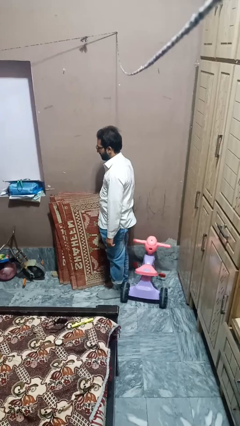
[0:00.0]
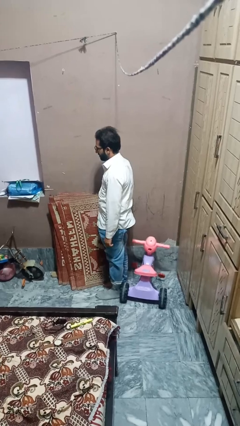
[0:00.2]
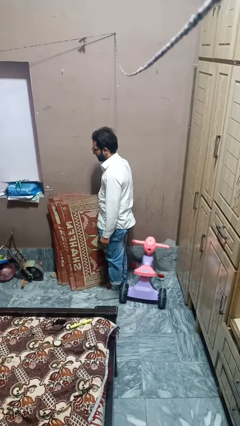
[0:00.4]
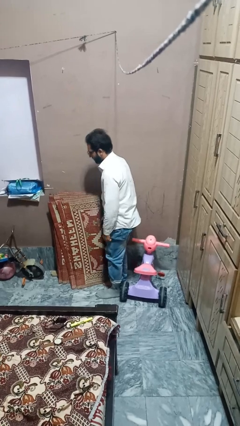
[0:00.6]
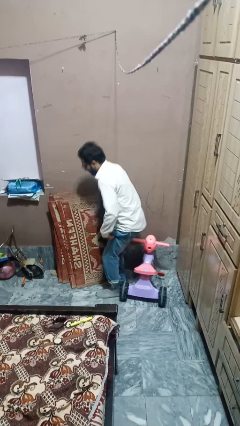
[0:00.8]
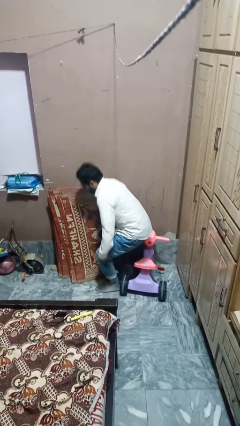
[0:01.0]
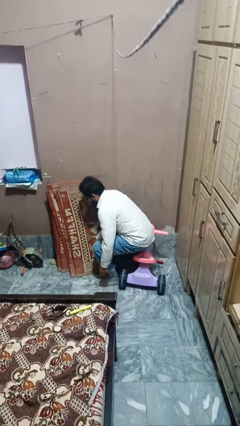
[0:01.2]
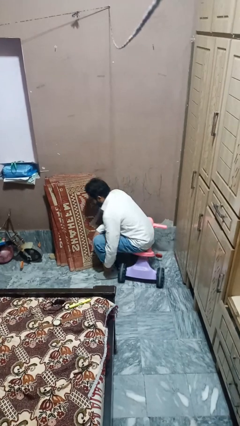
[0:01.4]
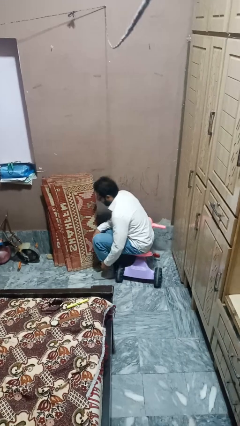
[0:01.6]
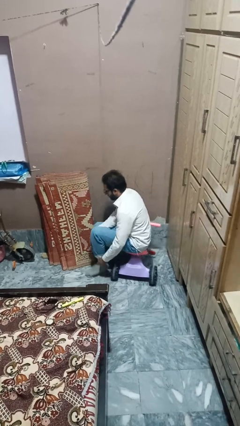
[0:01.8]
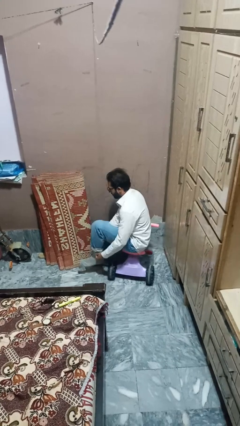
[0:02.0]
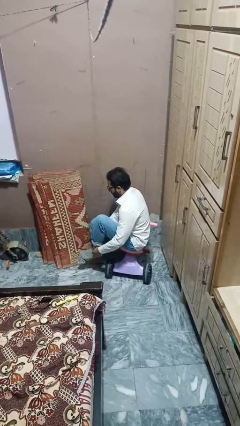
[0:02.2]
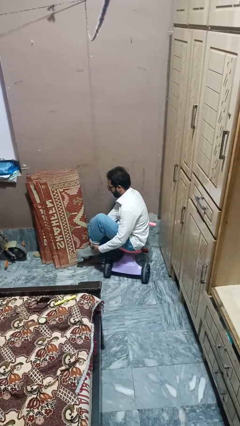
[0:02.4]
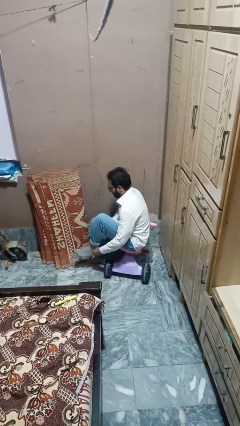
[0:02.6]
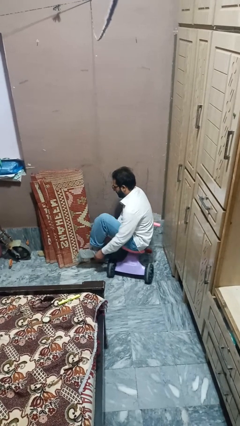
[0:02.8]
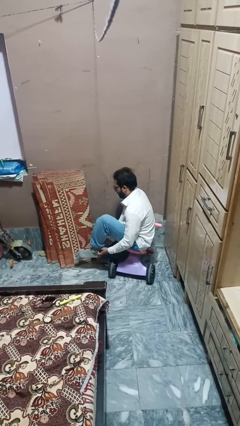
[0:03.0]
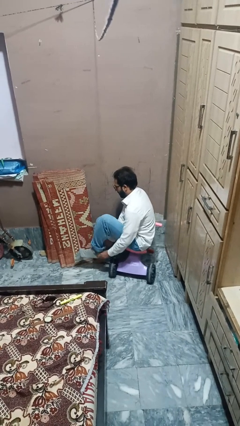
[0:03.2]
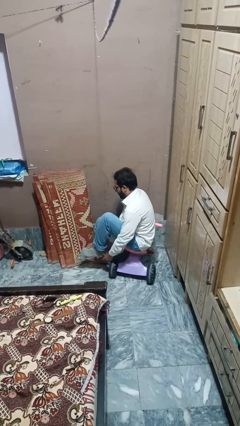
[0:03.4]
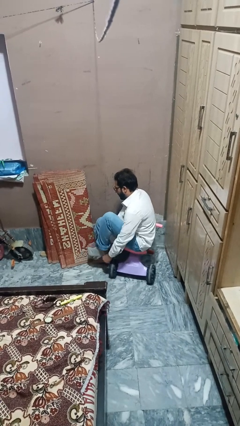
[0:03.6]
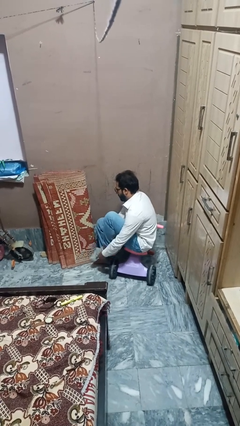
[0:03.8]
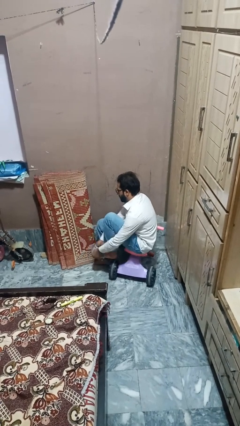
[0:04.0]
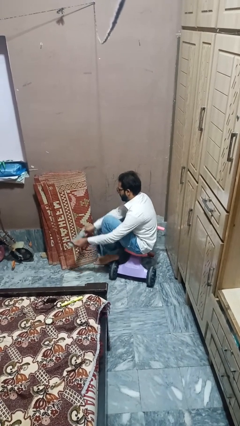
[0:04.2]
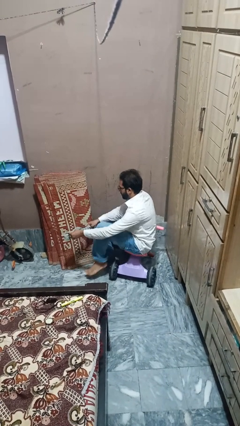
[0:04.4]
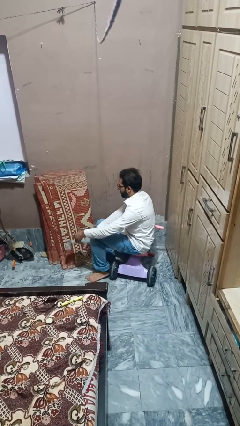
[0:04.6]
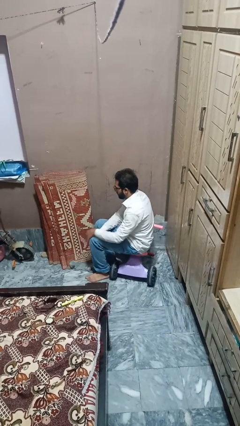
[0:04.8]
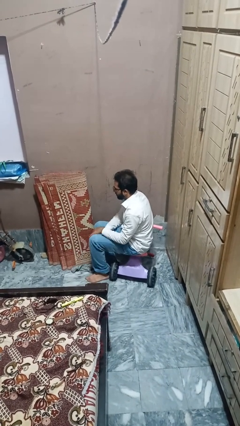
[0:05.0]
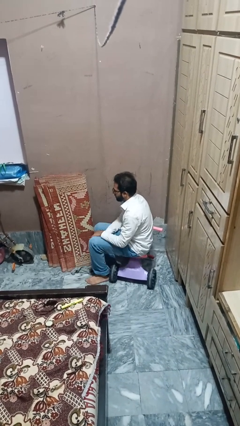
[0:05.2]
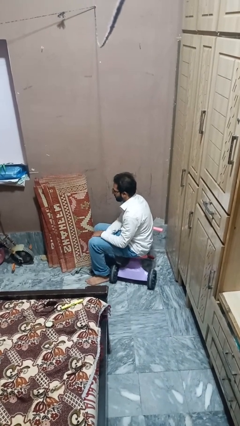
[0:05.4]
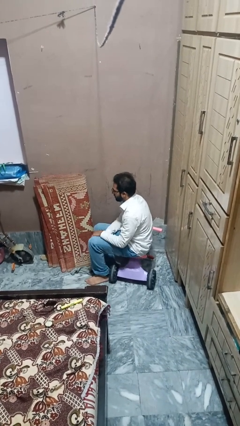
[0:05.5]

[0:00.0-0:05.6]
person takes off socks

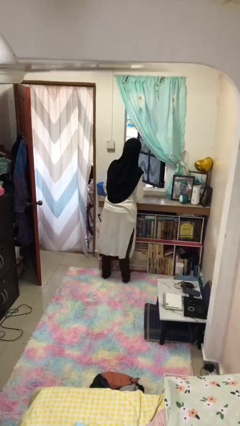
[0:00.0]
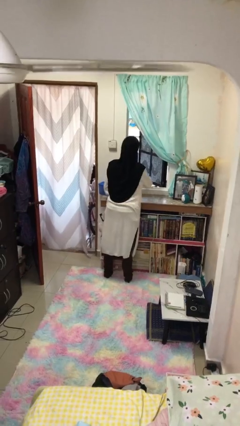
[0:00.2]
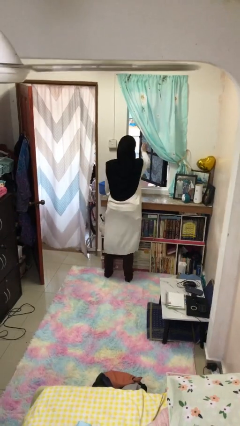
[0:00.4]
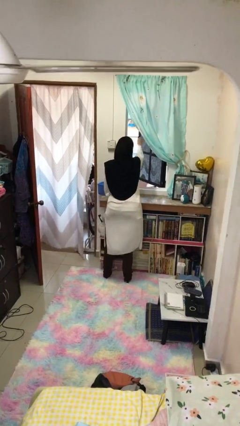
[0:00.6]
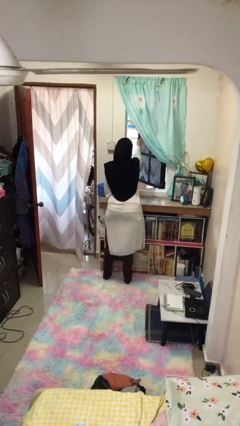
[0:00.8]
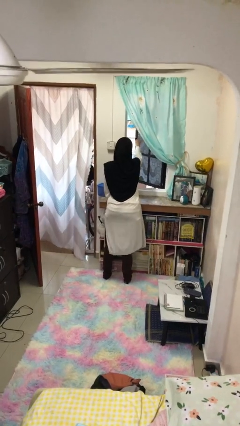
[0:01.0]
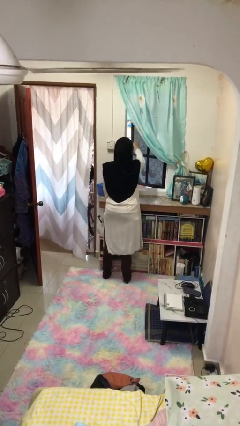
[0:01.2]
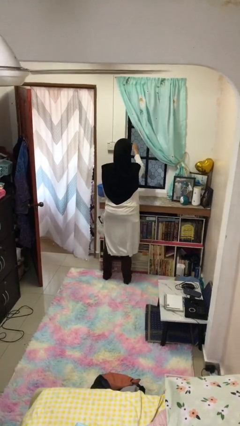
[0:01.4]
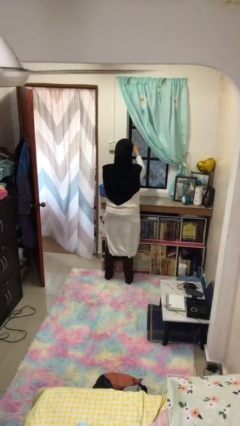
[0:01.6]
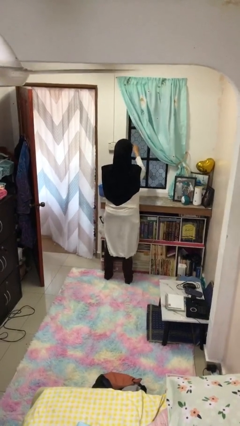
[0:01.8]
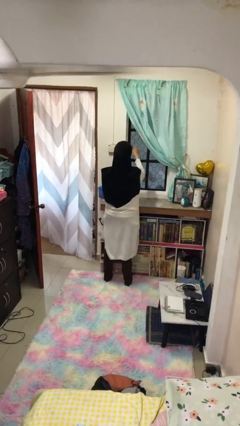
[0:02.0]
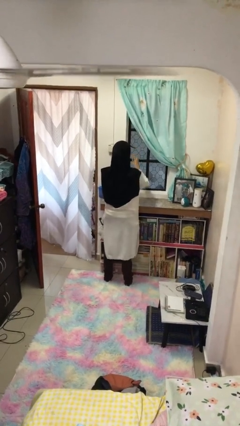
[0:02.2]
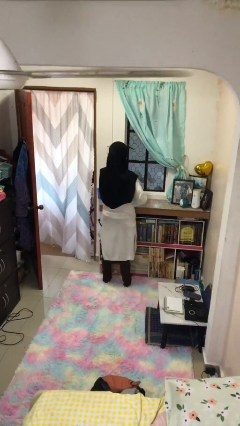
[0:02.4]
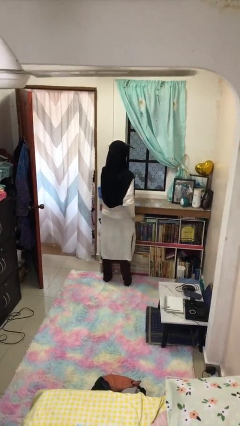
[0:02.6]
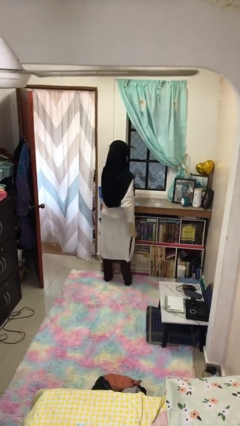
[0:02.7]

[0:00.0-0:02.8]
person closes home window

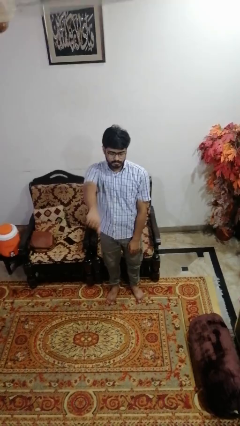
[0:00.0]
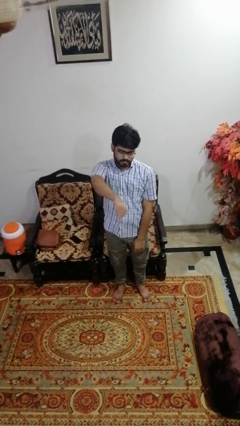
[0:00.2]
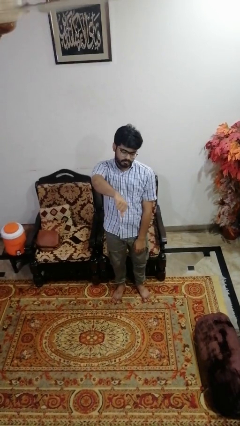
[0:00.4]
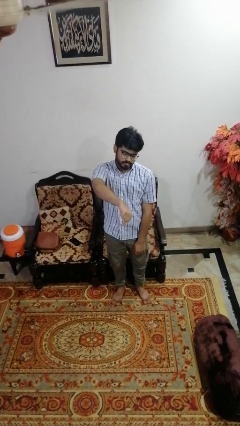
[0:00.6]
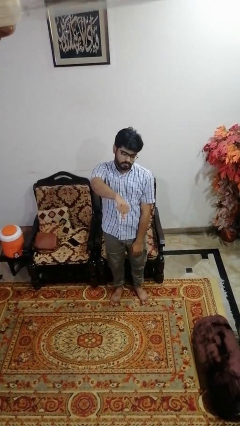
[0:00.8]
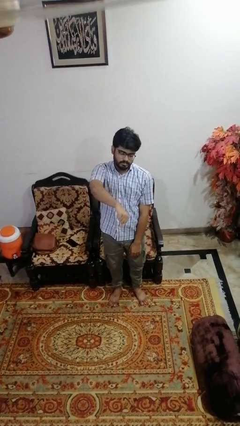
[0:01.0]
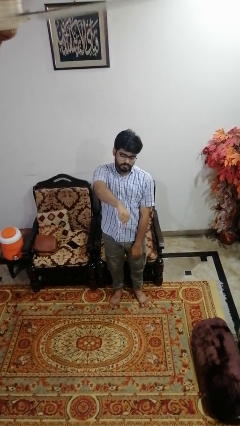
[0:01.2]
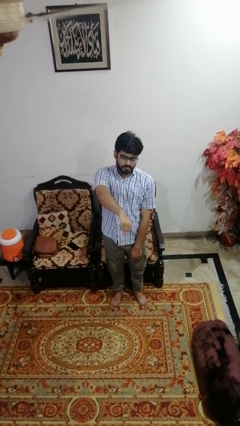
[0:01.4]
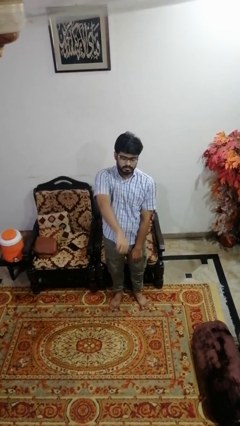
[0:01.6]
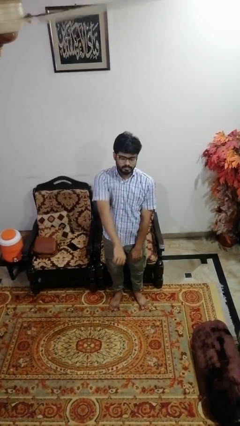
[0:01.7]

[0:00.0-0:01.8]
person gestures thumbs down

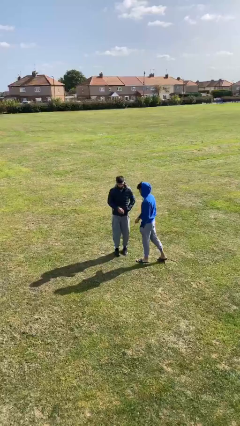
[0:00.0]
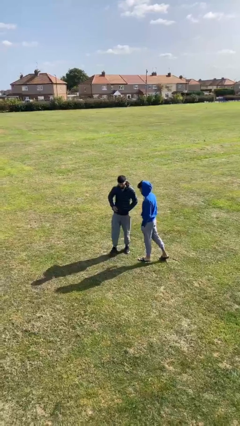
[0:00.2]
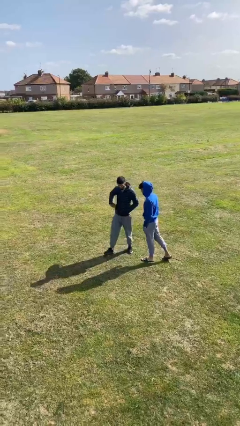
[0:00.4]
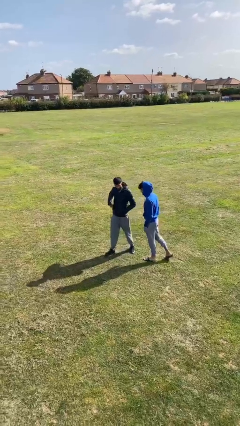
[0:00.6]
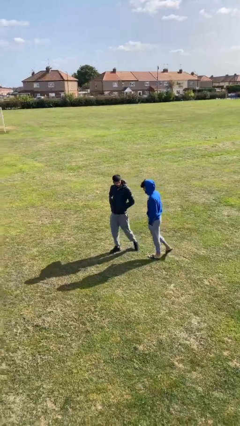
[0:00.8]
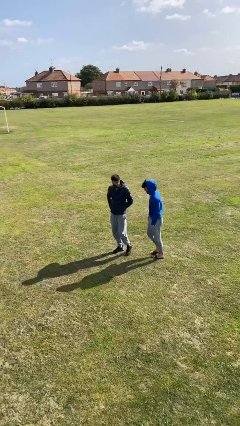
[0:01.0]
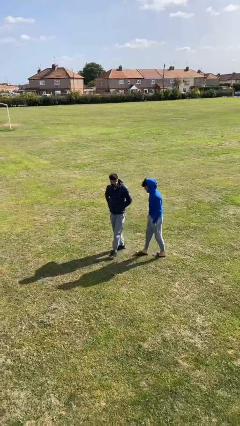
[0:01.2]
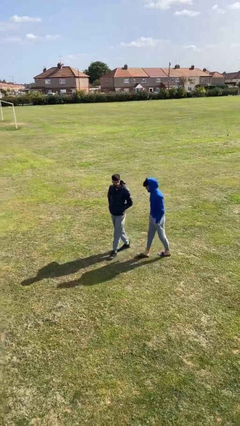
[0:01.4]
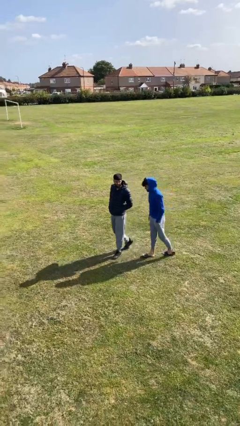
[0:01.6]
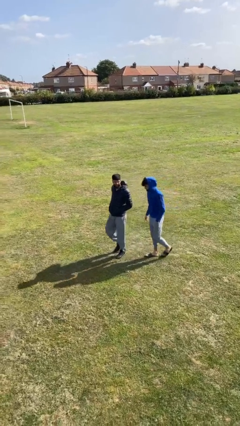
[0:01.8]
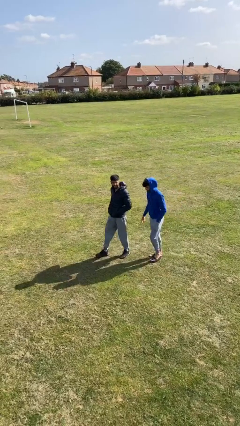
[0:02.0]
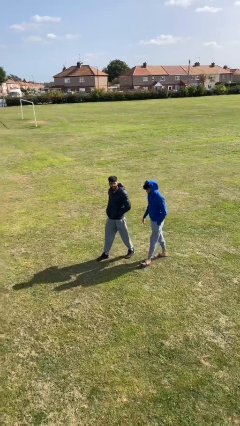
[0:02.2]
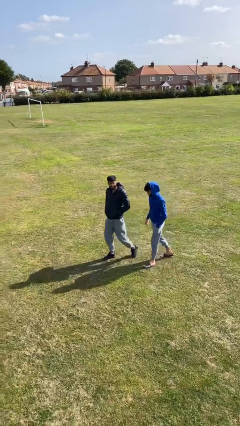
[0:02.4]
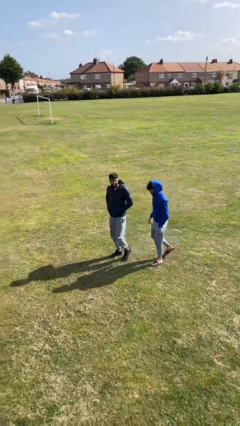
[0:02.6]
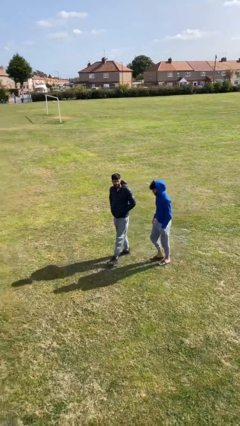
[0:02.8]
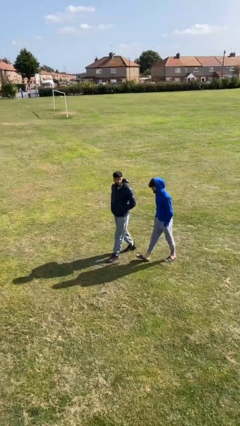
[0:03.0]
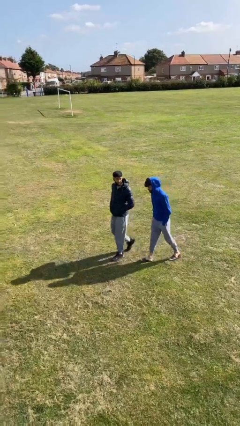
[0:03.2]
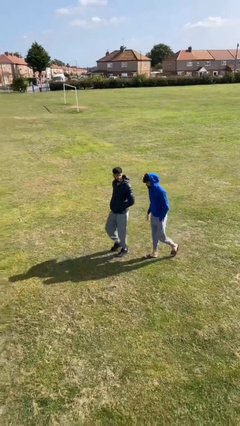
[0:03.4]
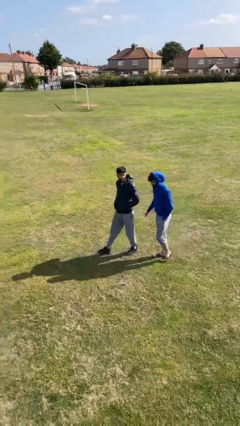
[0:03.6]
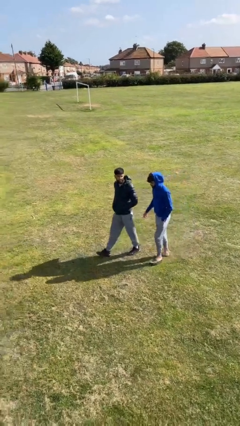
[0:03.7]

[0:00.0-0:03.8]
person talks to person

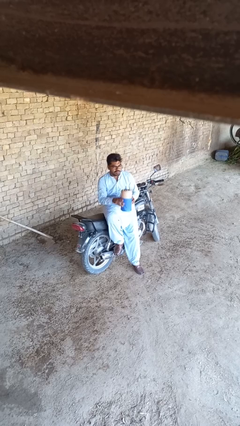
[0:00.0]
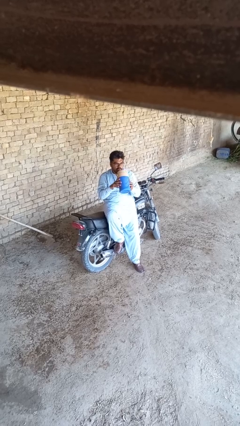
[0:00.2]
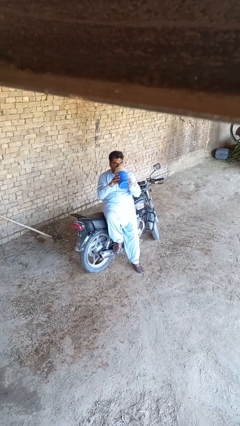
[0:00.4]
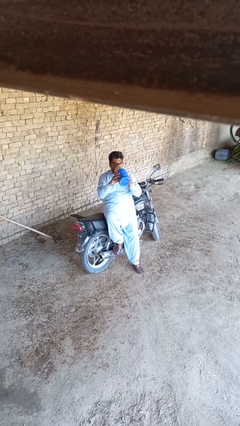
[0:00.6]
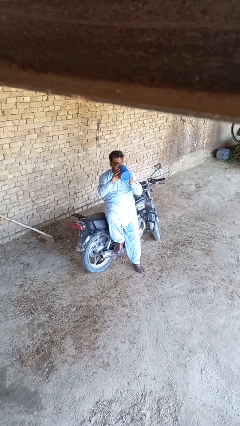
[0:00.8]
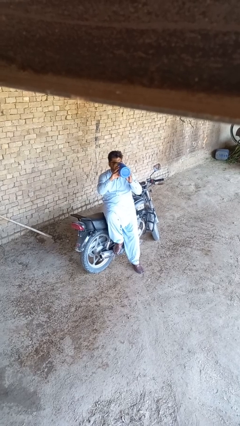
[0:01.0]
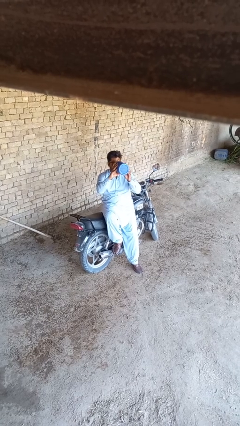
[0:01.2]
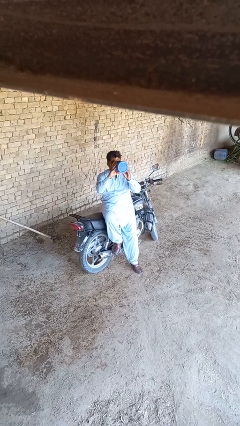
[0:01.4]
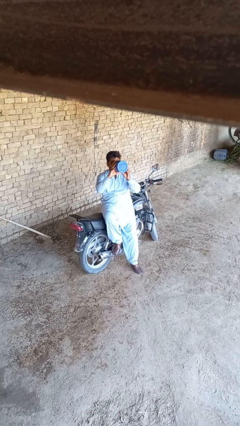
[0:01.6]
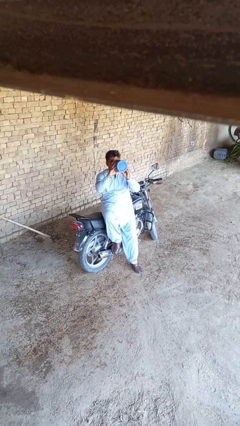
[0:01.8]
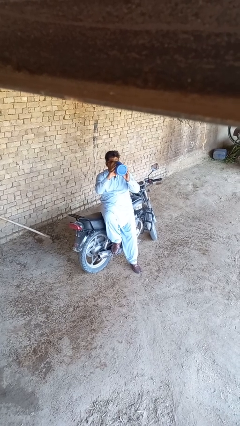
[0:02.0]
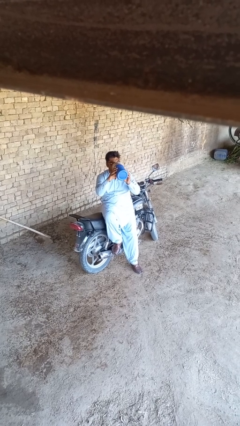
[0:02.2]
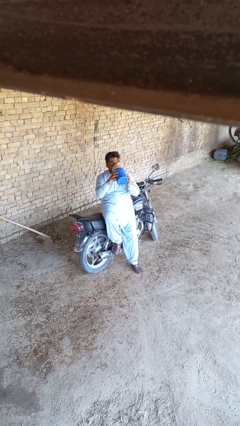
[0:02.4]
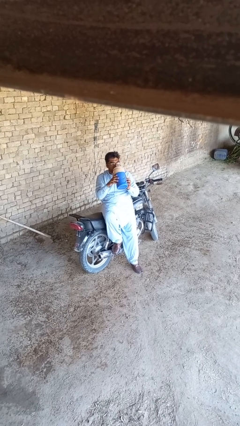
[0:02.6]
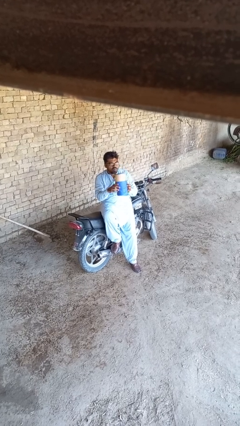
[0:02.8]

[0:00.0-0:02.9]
person drinks from bottle

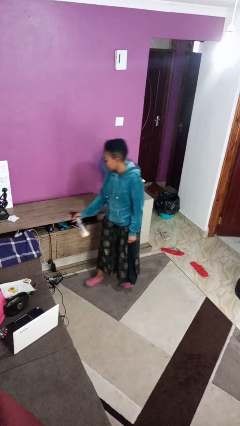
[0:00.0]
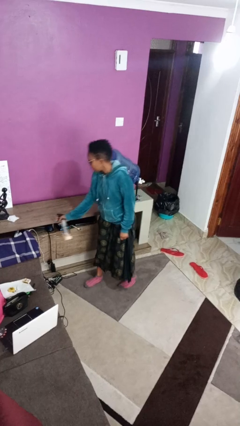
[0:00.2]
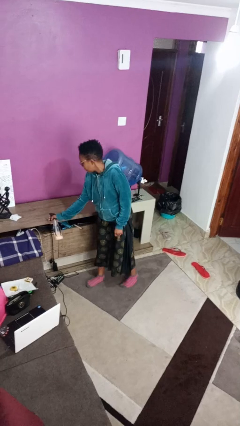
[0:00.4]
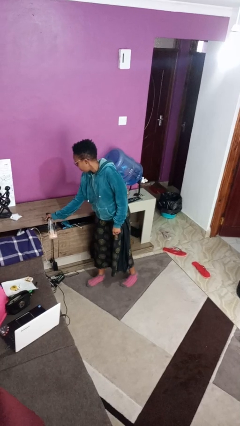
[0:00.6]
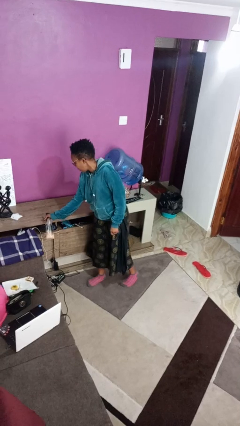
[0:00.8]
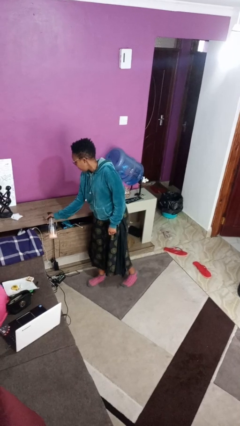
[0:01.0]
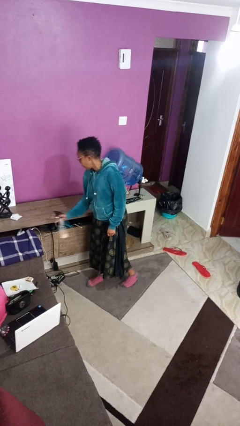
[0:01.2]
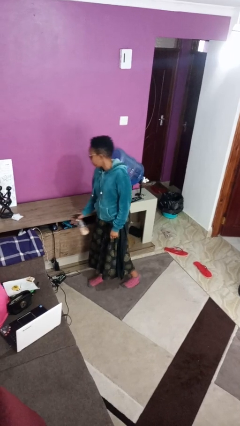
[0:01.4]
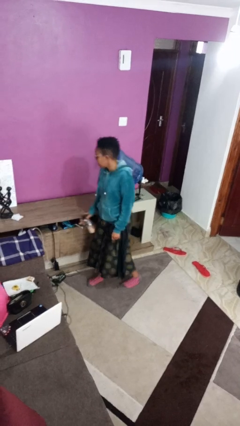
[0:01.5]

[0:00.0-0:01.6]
person sprays from bottle
